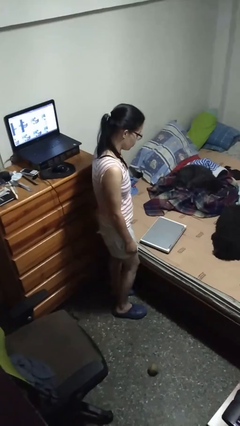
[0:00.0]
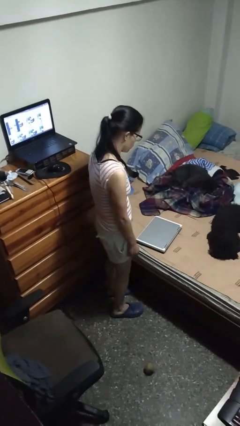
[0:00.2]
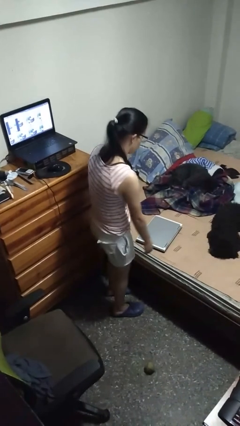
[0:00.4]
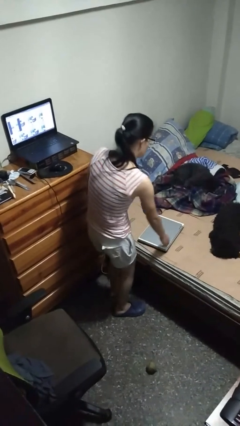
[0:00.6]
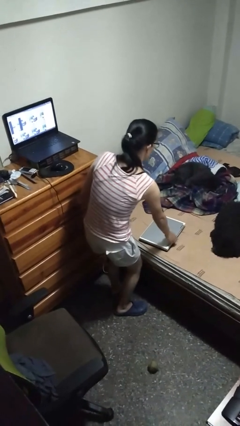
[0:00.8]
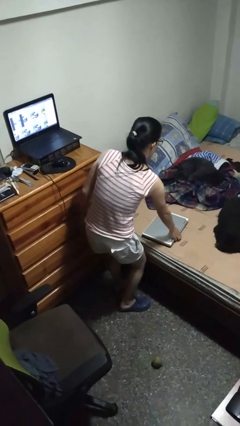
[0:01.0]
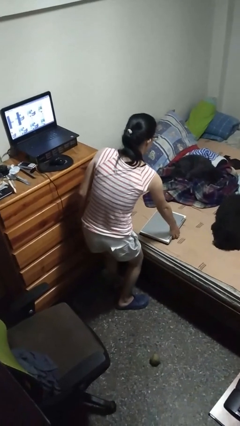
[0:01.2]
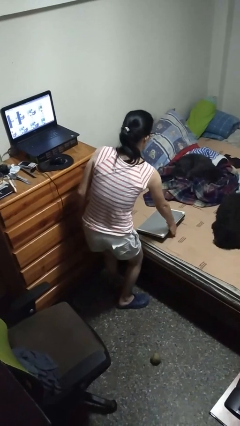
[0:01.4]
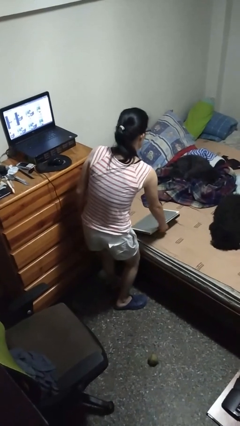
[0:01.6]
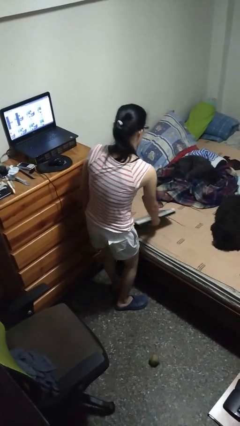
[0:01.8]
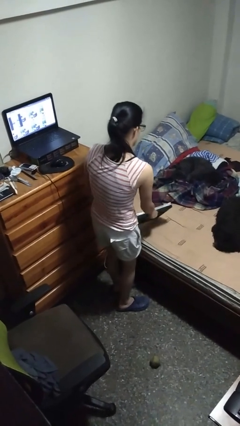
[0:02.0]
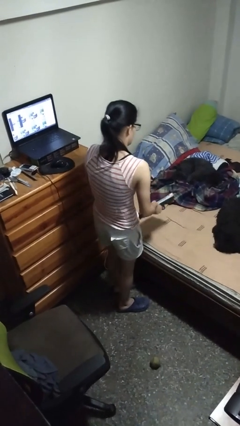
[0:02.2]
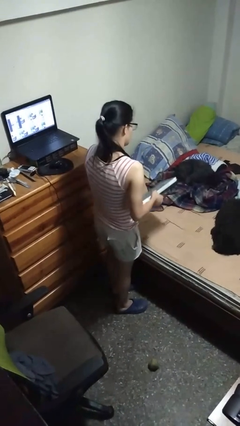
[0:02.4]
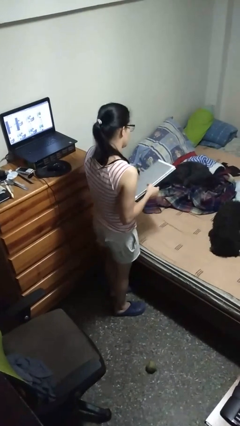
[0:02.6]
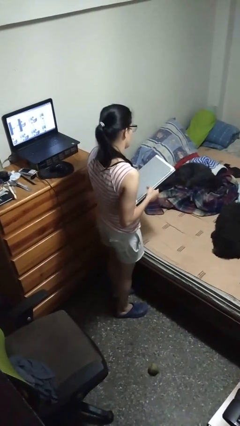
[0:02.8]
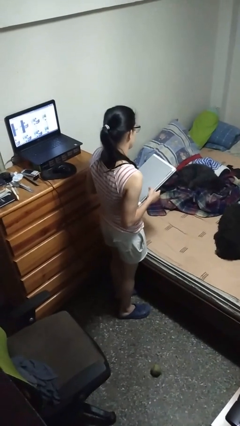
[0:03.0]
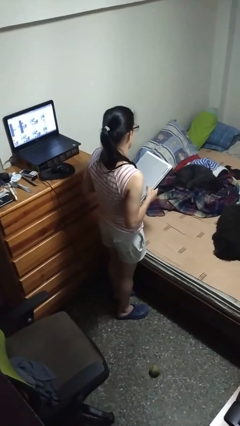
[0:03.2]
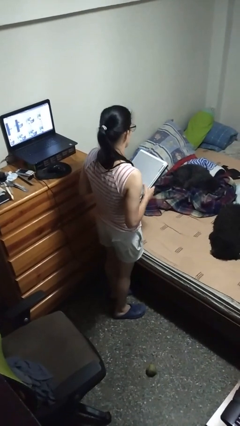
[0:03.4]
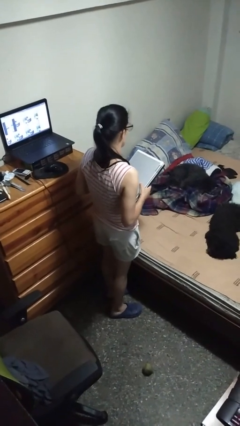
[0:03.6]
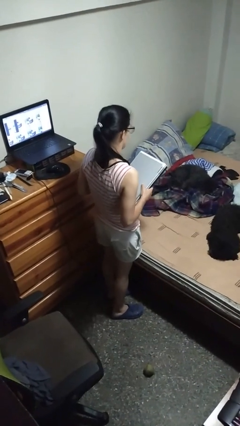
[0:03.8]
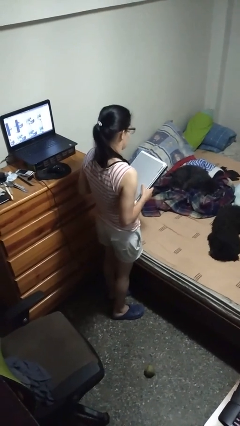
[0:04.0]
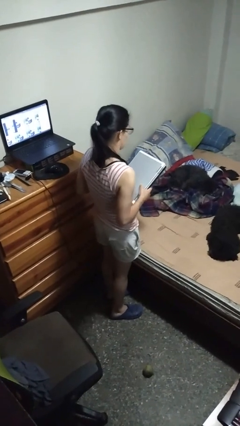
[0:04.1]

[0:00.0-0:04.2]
person picks up object from bed

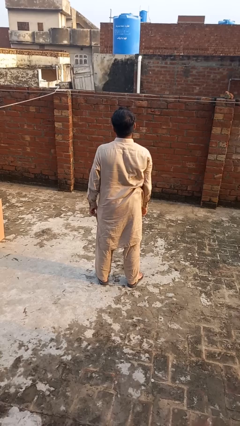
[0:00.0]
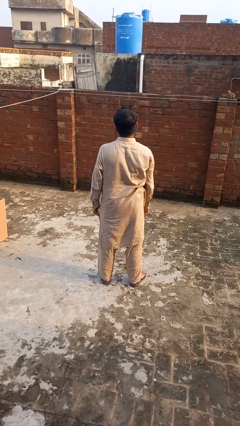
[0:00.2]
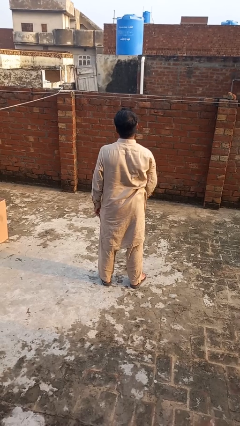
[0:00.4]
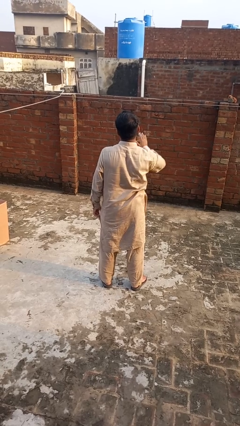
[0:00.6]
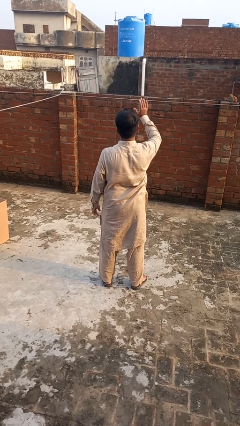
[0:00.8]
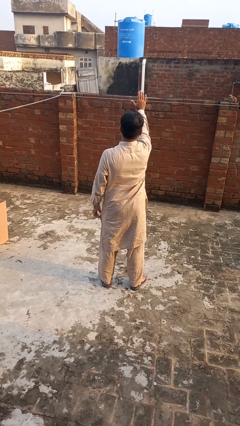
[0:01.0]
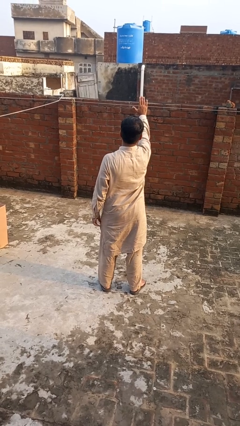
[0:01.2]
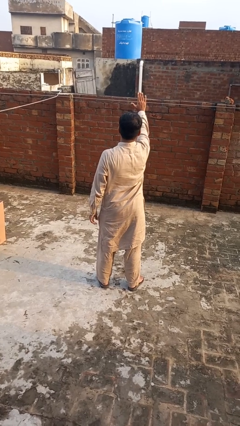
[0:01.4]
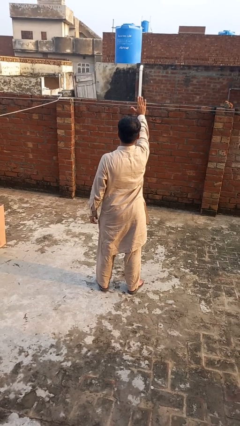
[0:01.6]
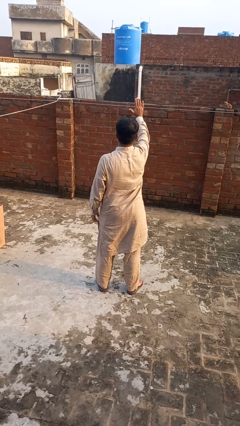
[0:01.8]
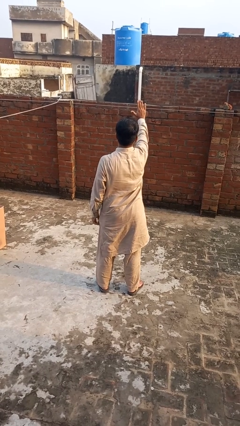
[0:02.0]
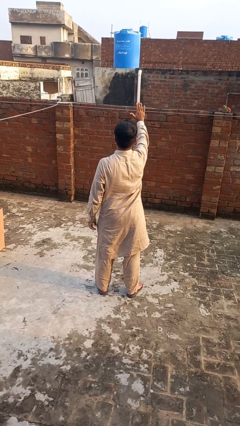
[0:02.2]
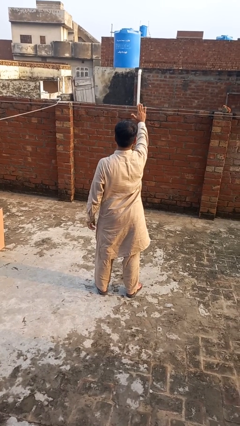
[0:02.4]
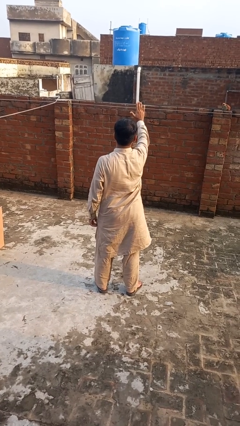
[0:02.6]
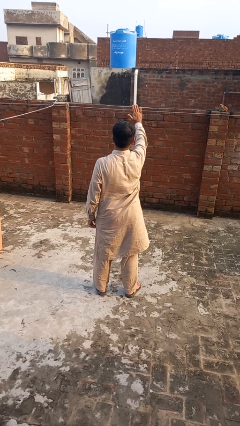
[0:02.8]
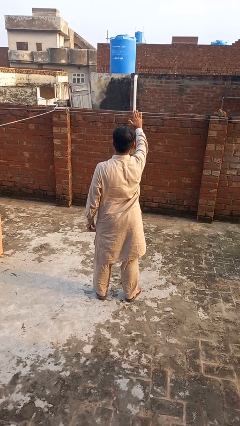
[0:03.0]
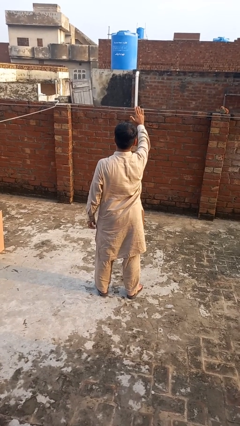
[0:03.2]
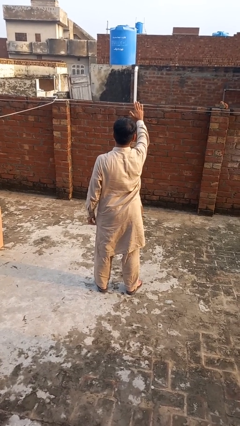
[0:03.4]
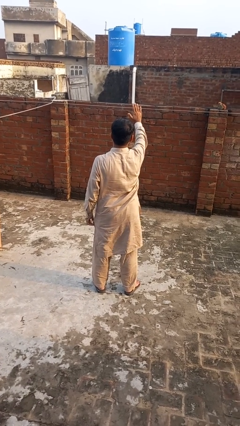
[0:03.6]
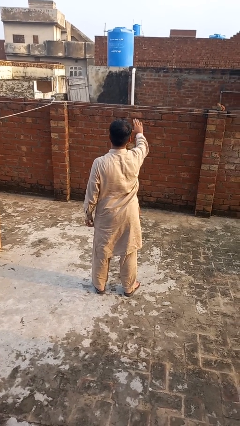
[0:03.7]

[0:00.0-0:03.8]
person gestures stop

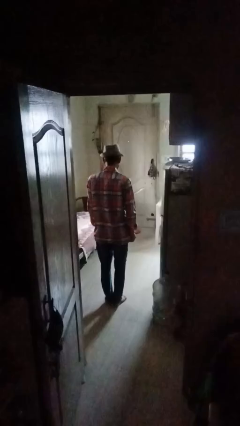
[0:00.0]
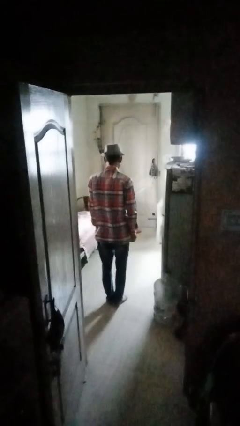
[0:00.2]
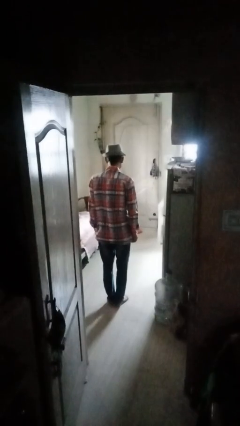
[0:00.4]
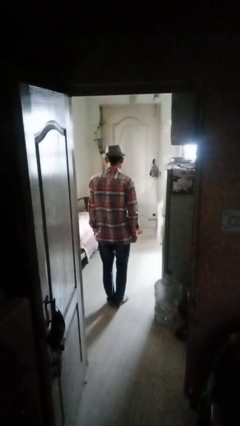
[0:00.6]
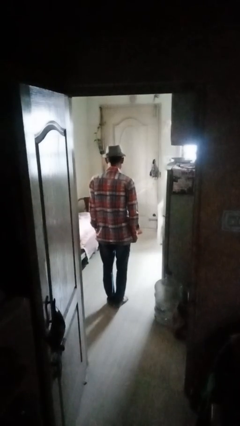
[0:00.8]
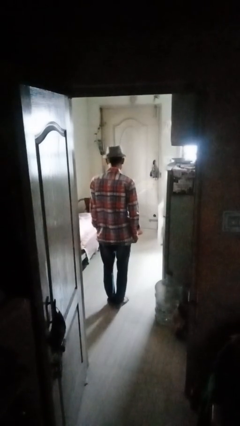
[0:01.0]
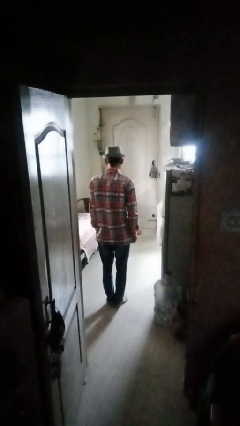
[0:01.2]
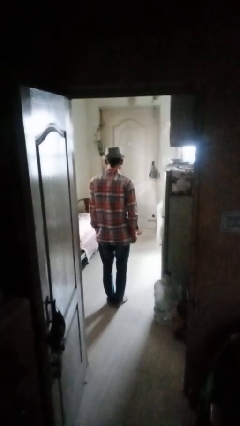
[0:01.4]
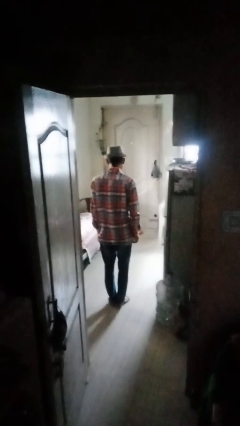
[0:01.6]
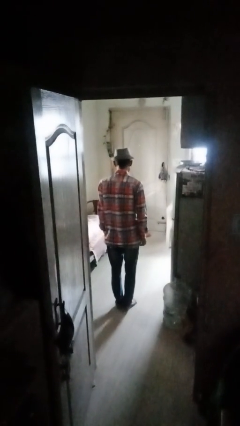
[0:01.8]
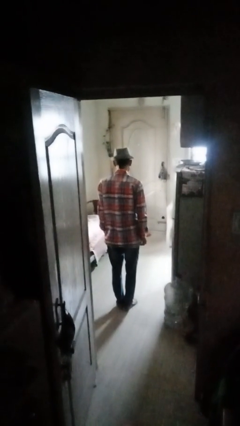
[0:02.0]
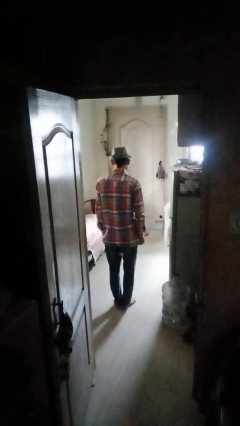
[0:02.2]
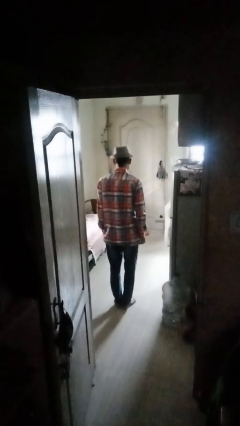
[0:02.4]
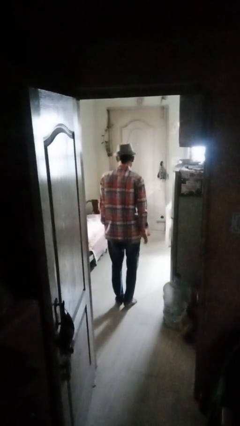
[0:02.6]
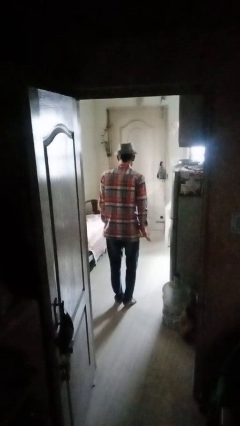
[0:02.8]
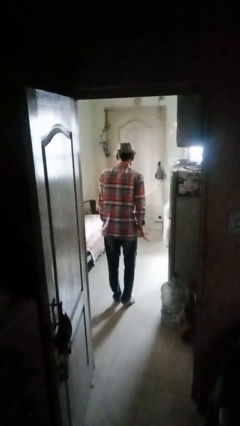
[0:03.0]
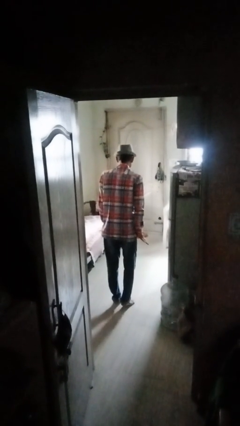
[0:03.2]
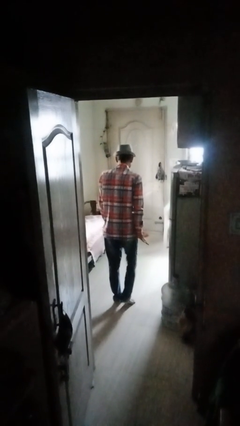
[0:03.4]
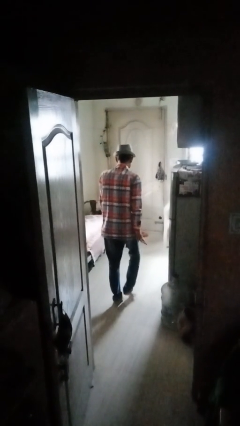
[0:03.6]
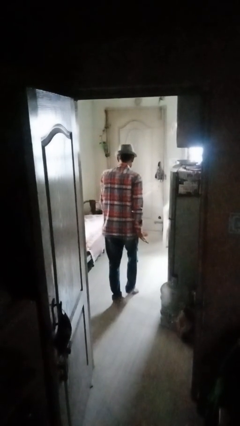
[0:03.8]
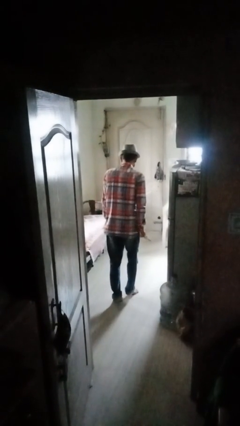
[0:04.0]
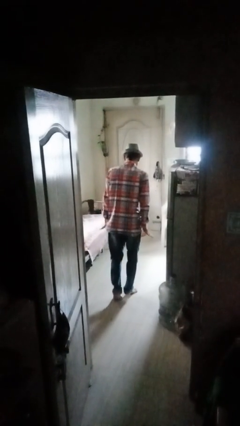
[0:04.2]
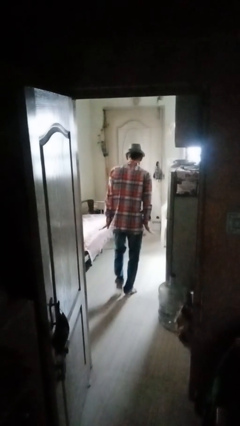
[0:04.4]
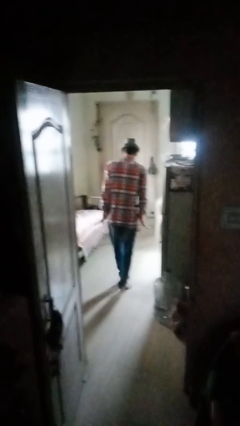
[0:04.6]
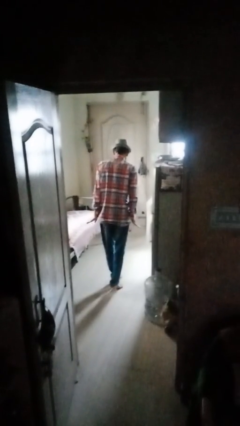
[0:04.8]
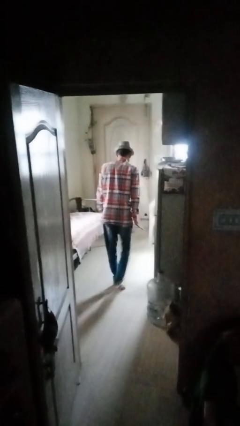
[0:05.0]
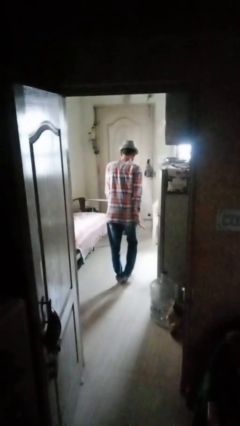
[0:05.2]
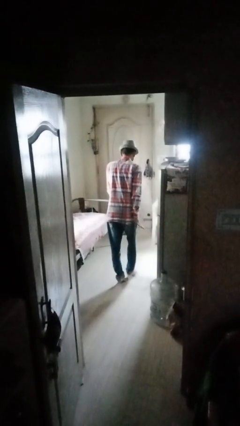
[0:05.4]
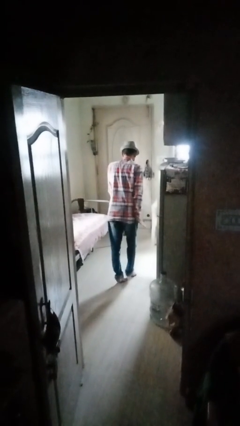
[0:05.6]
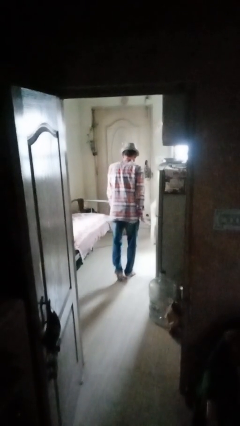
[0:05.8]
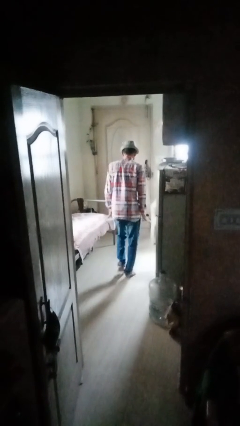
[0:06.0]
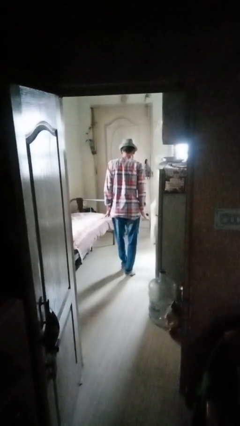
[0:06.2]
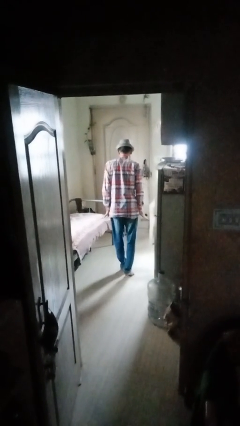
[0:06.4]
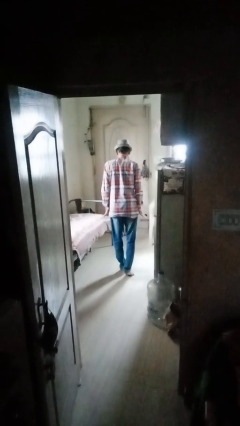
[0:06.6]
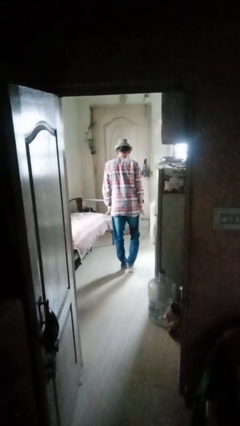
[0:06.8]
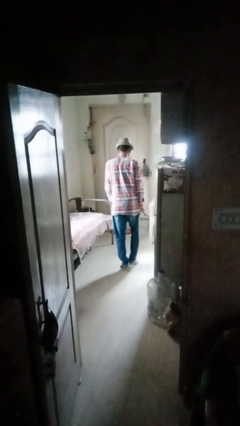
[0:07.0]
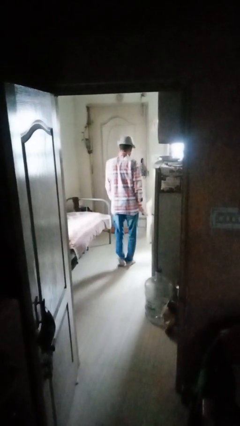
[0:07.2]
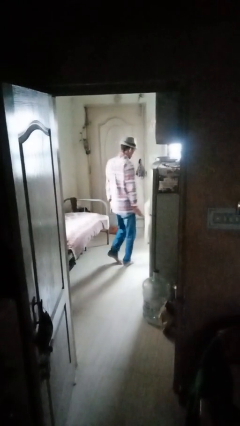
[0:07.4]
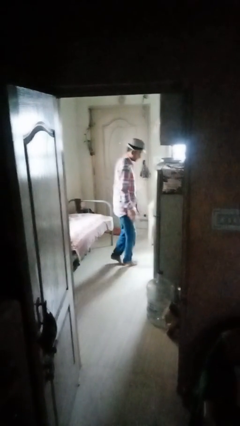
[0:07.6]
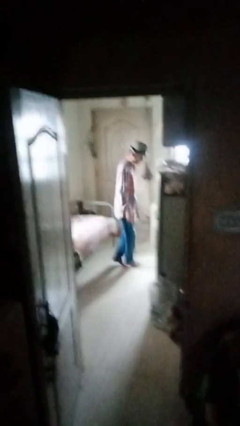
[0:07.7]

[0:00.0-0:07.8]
person walks tiptoe

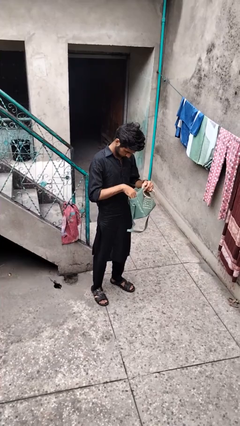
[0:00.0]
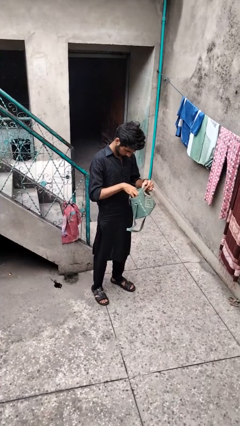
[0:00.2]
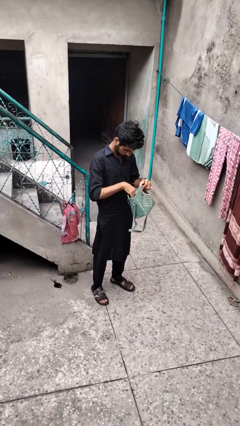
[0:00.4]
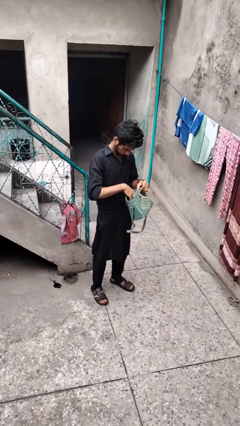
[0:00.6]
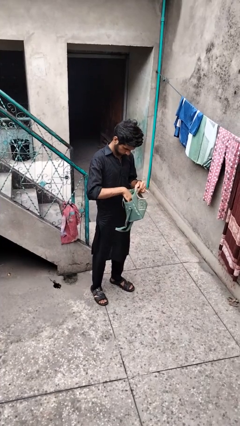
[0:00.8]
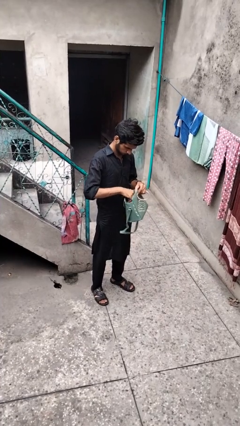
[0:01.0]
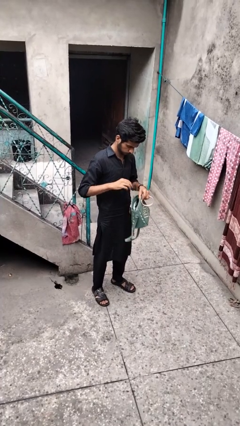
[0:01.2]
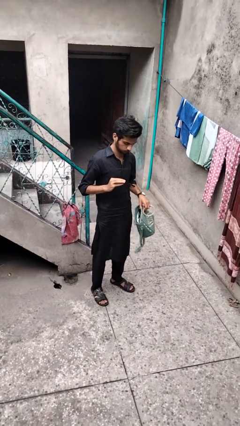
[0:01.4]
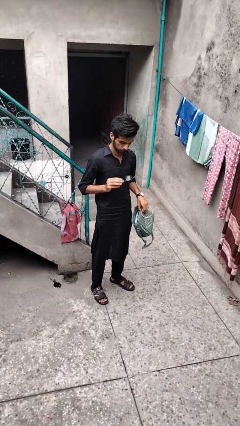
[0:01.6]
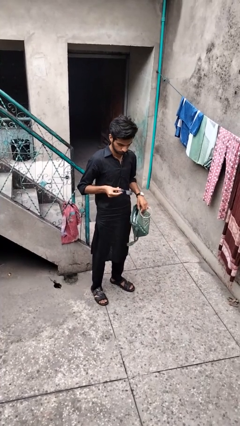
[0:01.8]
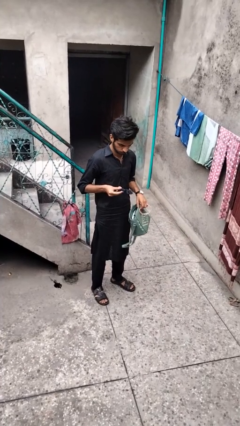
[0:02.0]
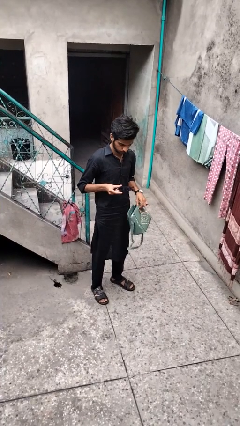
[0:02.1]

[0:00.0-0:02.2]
person takes object from purse
